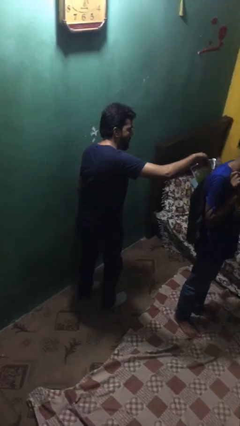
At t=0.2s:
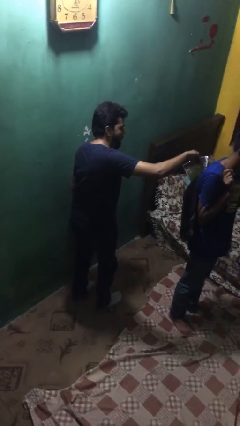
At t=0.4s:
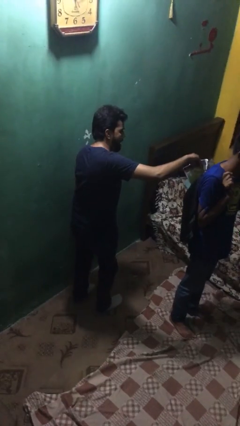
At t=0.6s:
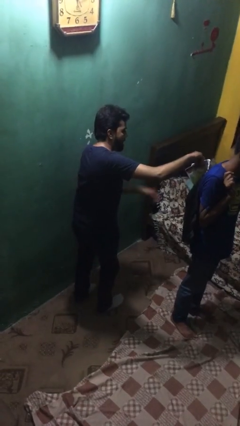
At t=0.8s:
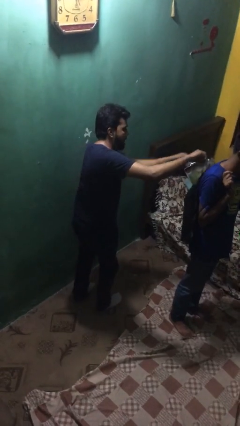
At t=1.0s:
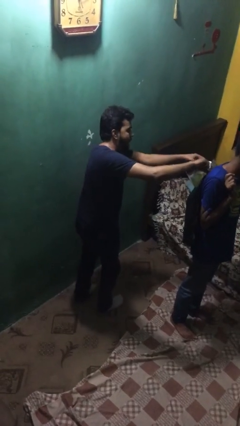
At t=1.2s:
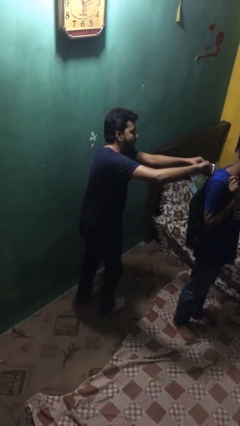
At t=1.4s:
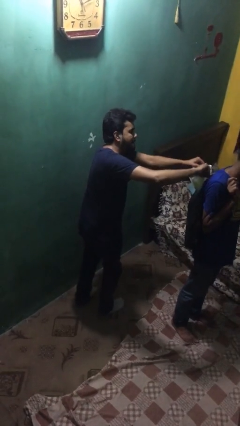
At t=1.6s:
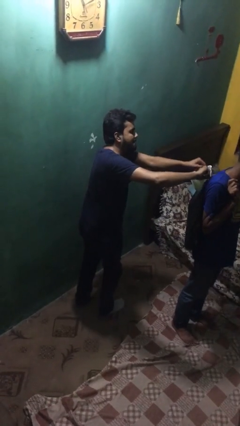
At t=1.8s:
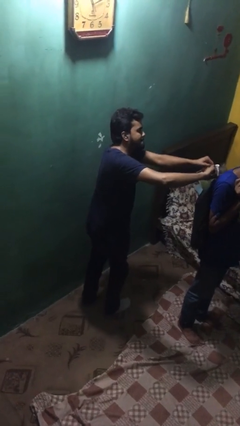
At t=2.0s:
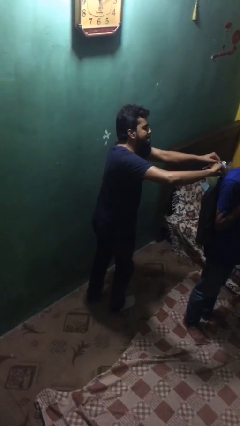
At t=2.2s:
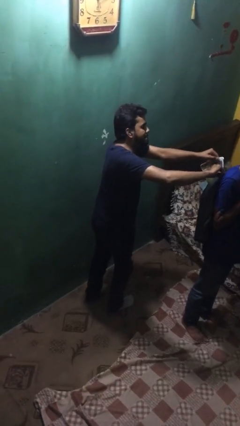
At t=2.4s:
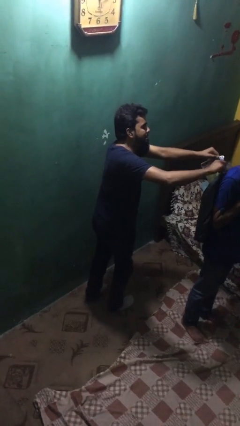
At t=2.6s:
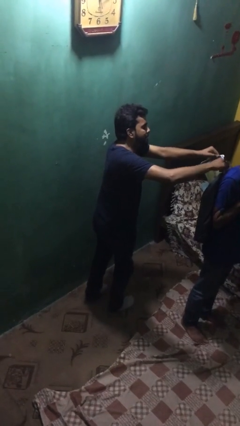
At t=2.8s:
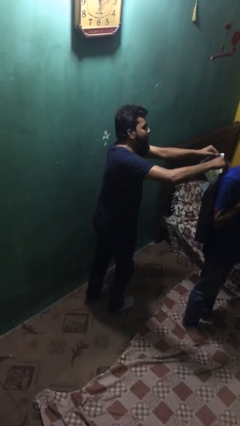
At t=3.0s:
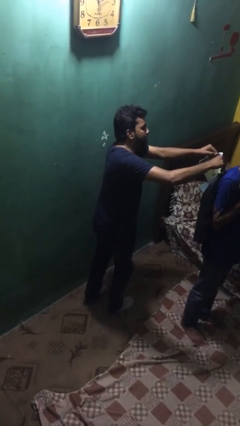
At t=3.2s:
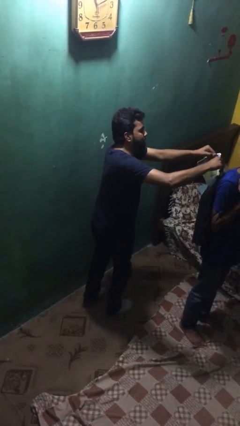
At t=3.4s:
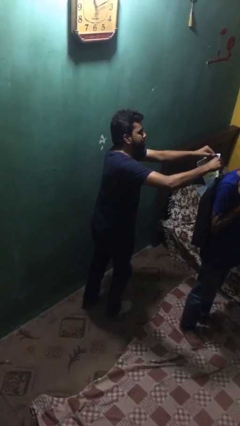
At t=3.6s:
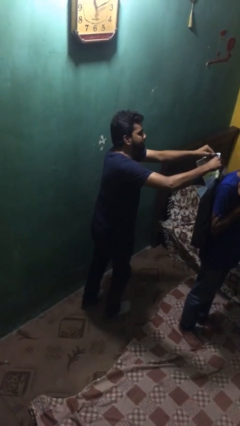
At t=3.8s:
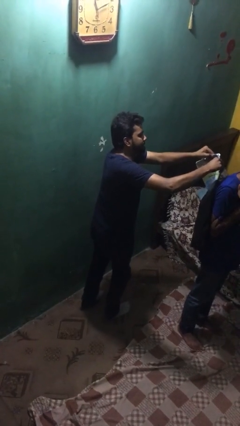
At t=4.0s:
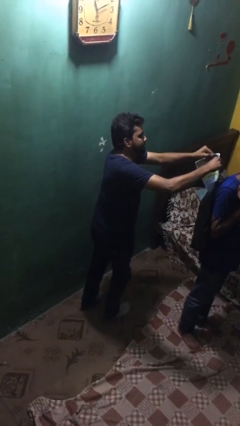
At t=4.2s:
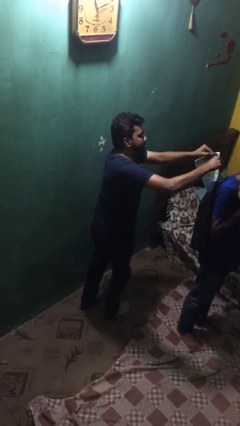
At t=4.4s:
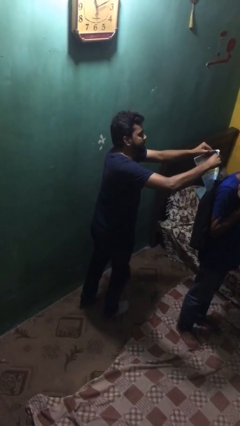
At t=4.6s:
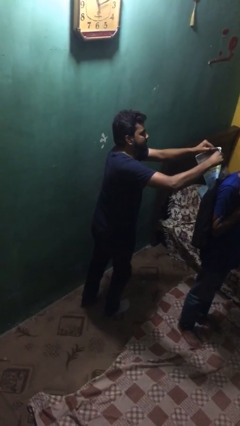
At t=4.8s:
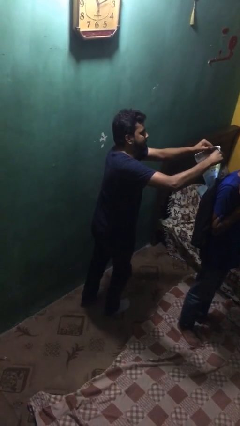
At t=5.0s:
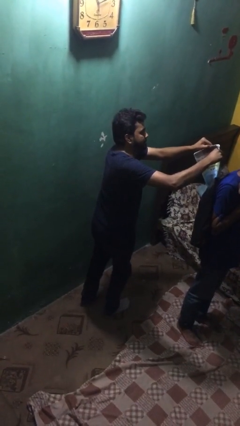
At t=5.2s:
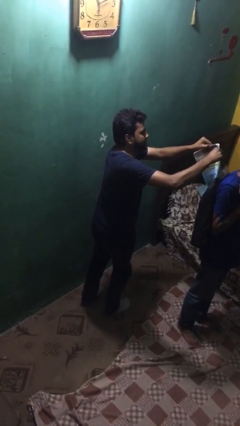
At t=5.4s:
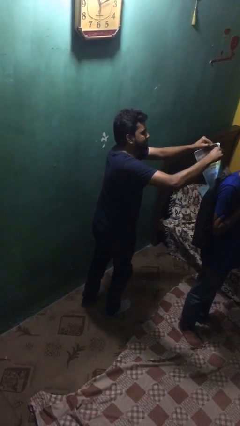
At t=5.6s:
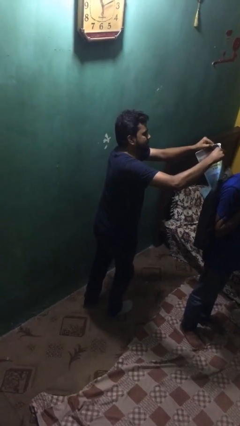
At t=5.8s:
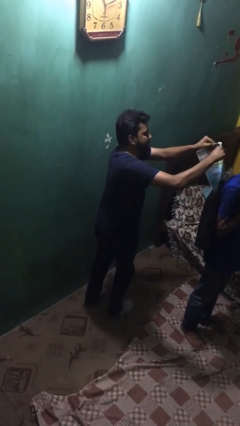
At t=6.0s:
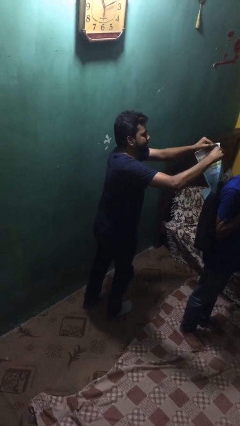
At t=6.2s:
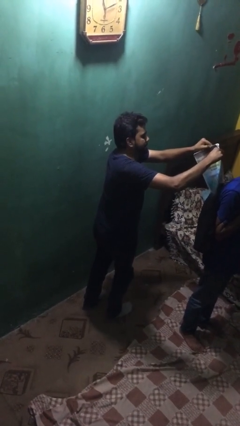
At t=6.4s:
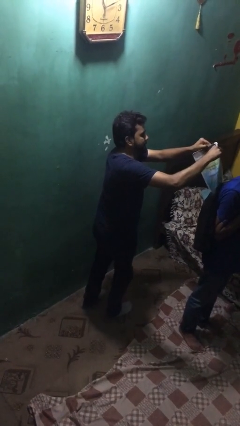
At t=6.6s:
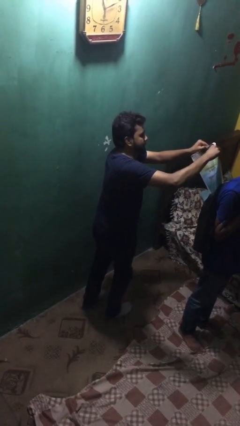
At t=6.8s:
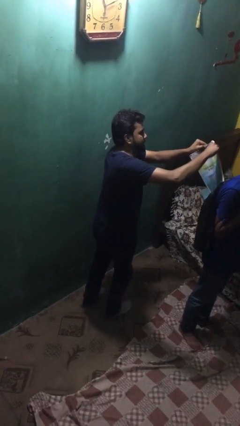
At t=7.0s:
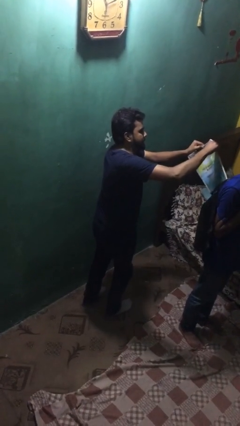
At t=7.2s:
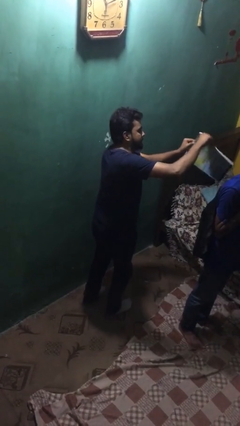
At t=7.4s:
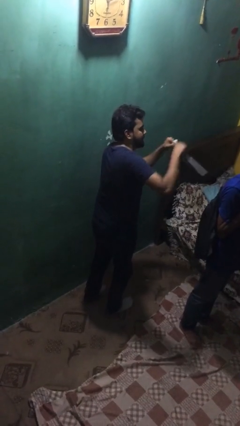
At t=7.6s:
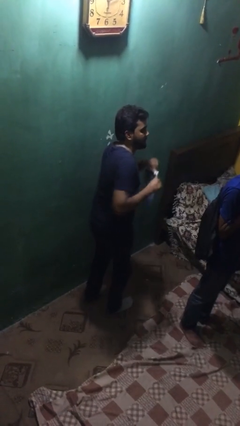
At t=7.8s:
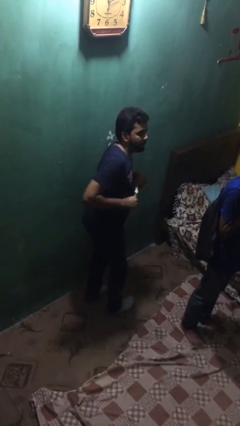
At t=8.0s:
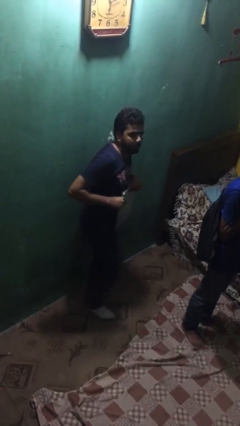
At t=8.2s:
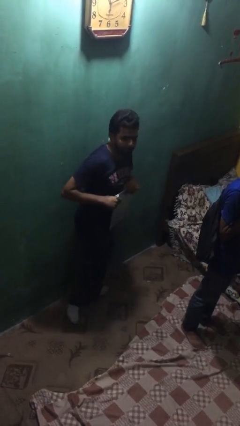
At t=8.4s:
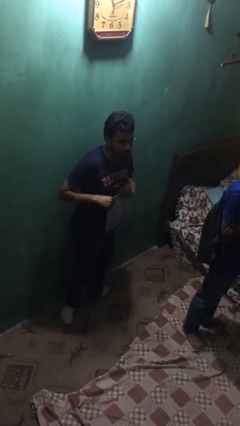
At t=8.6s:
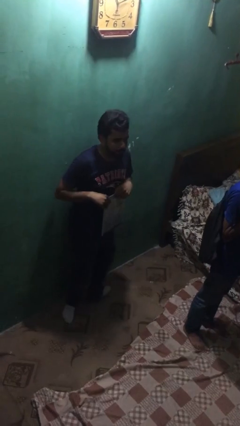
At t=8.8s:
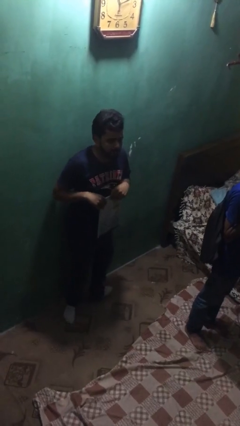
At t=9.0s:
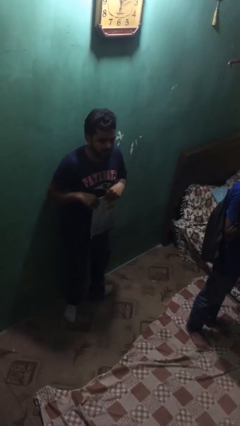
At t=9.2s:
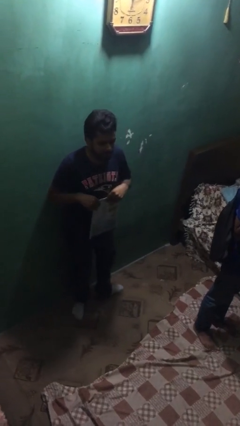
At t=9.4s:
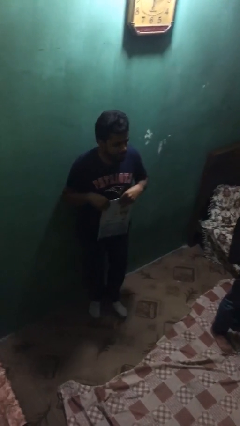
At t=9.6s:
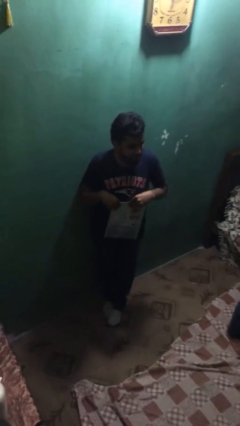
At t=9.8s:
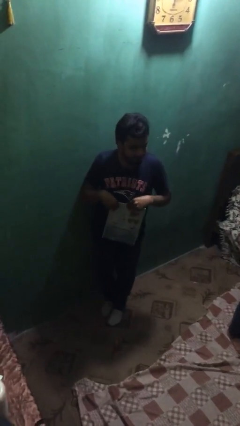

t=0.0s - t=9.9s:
person steals object from person

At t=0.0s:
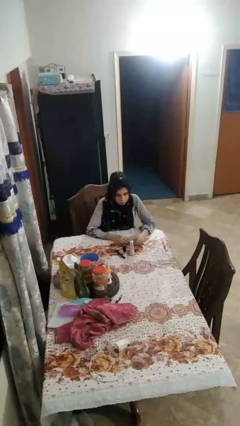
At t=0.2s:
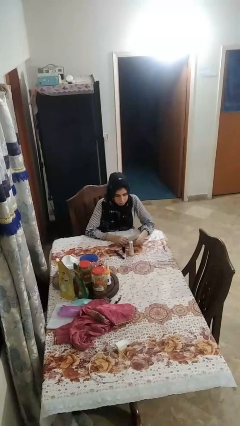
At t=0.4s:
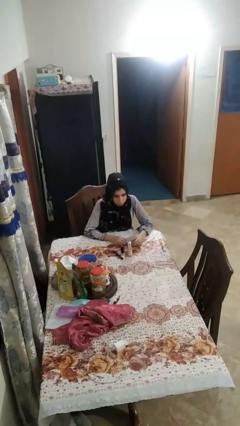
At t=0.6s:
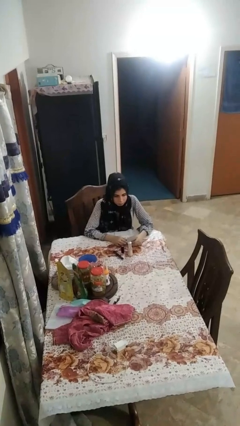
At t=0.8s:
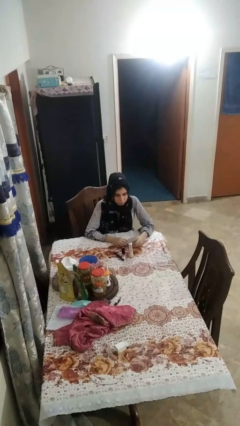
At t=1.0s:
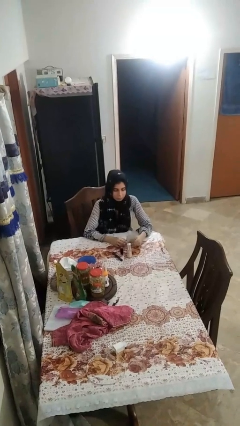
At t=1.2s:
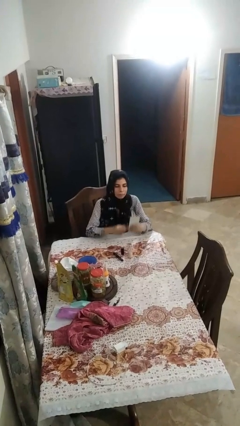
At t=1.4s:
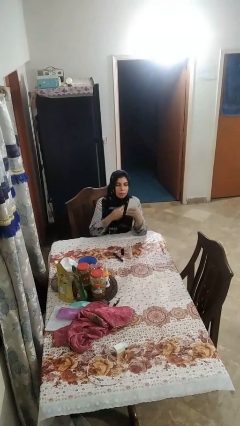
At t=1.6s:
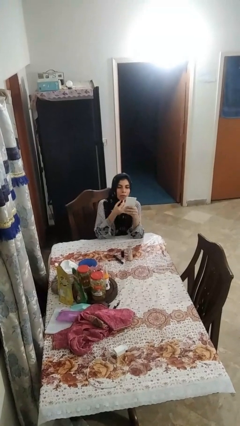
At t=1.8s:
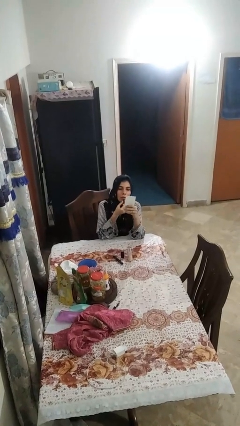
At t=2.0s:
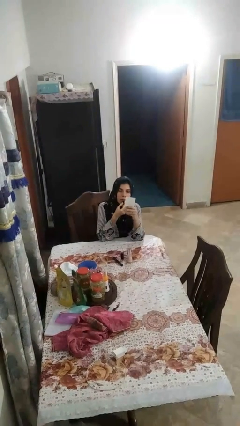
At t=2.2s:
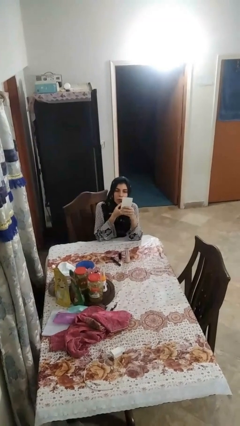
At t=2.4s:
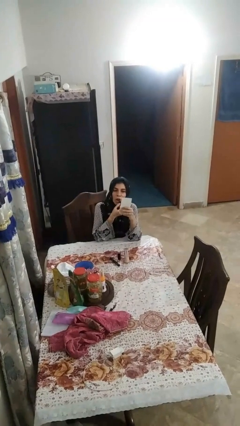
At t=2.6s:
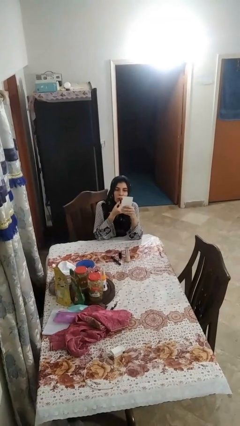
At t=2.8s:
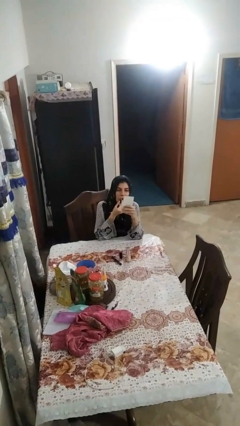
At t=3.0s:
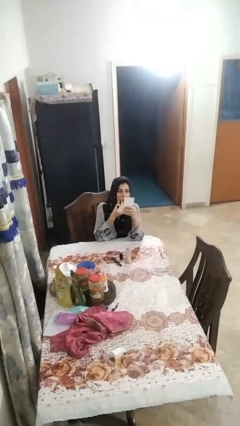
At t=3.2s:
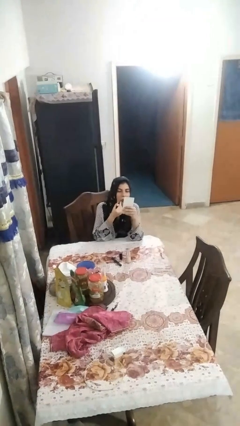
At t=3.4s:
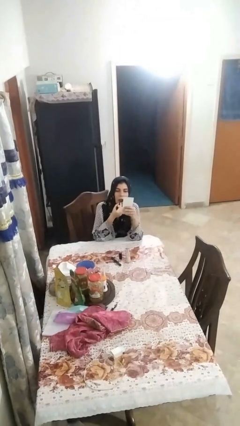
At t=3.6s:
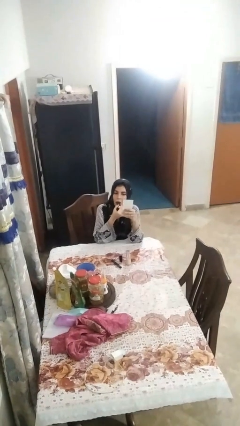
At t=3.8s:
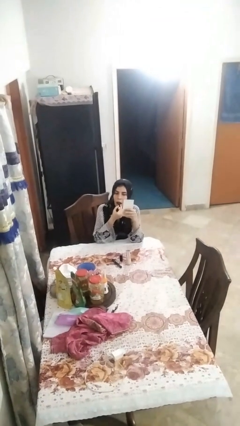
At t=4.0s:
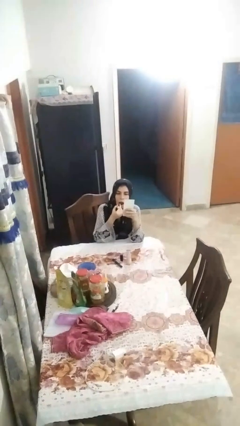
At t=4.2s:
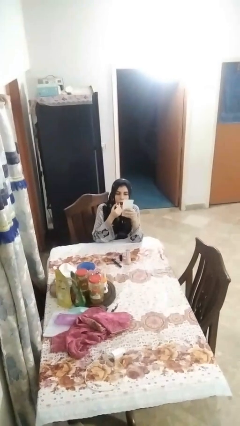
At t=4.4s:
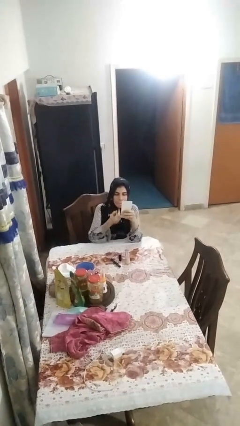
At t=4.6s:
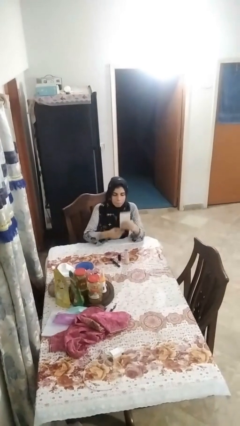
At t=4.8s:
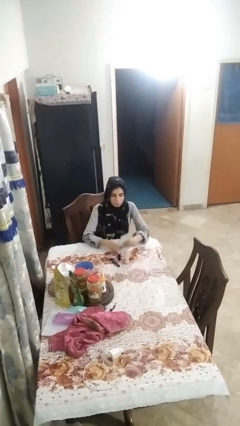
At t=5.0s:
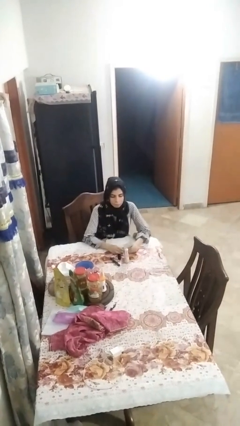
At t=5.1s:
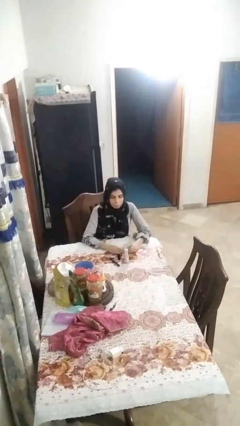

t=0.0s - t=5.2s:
person applies lip makeup

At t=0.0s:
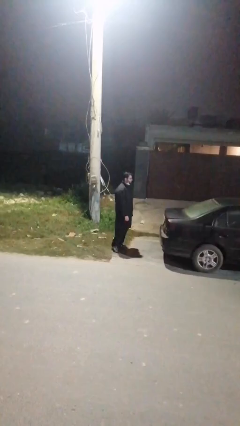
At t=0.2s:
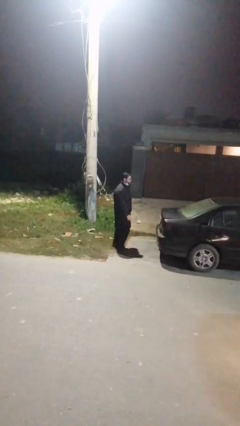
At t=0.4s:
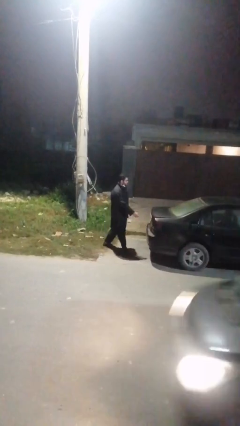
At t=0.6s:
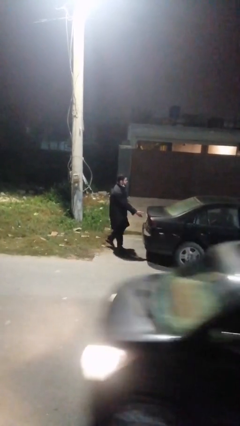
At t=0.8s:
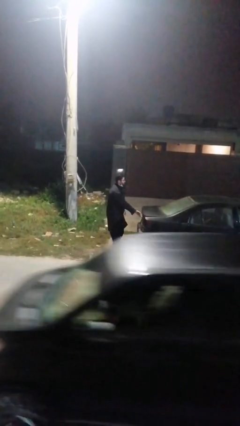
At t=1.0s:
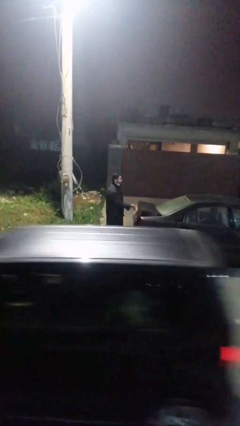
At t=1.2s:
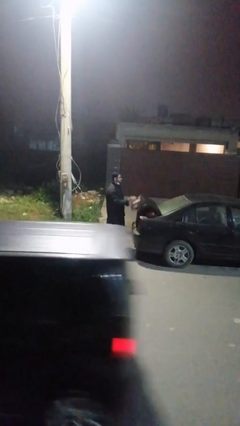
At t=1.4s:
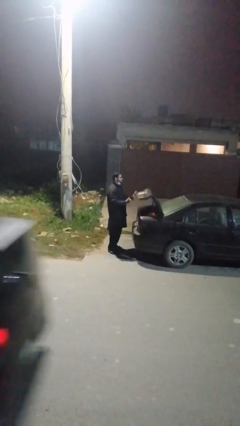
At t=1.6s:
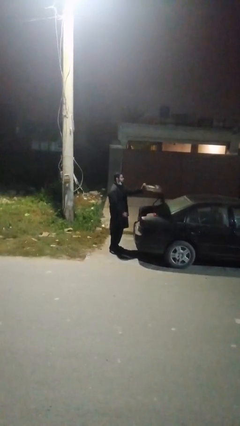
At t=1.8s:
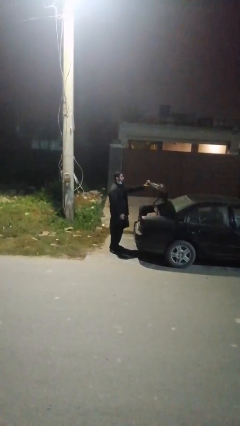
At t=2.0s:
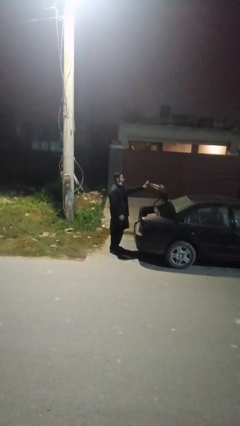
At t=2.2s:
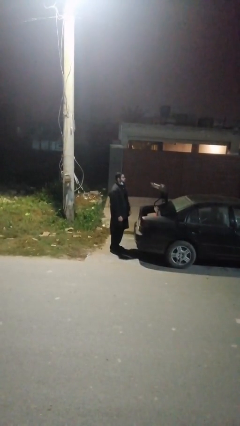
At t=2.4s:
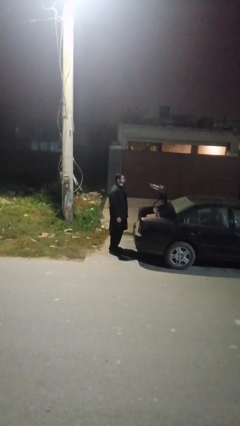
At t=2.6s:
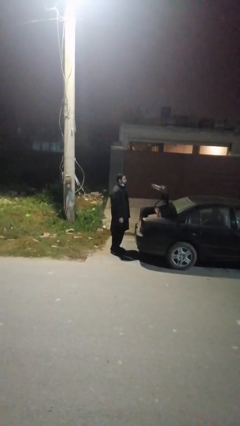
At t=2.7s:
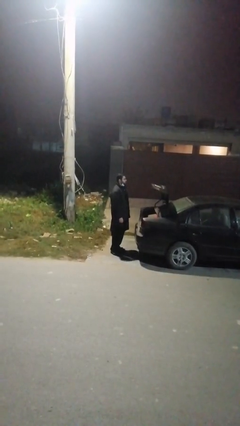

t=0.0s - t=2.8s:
person opens car trunk

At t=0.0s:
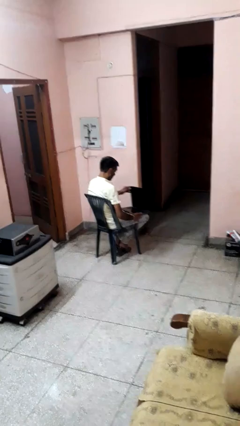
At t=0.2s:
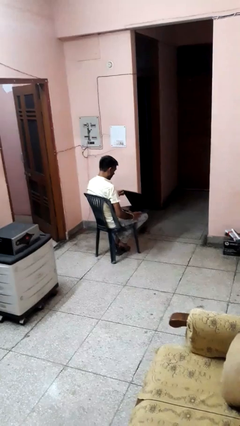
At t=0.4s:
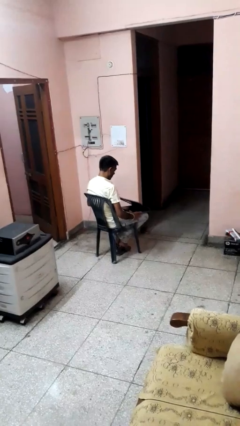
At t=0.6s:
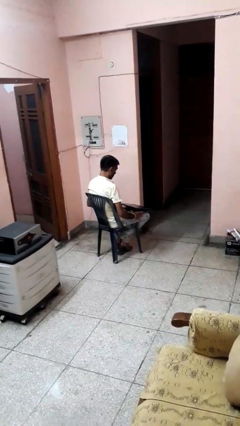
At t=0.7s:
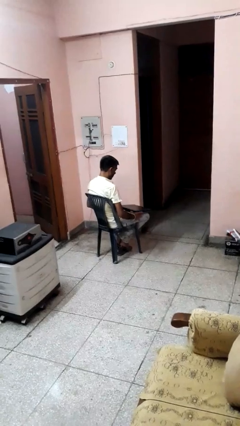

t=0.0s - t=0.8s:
person closes laptop
